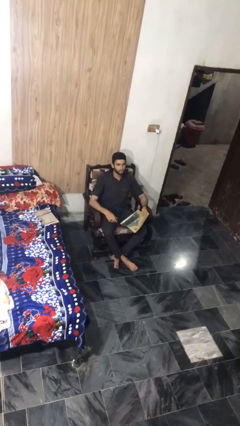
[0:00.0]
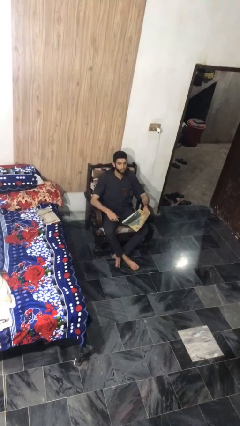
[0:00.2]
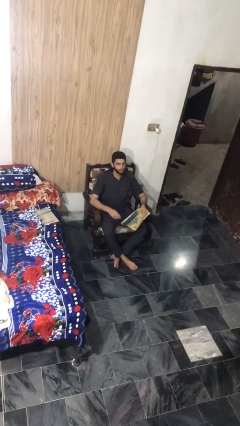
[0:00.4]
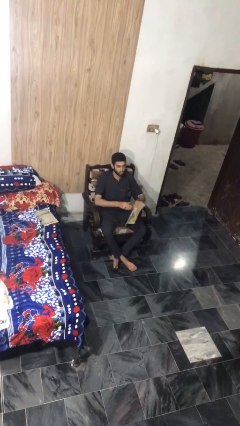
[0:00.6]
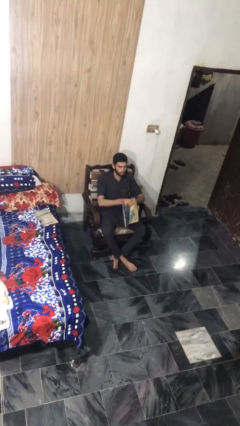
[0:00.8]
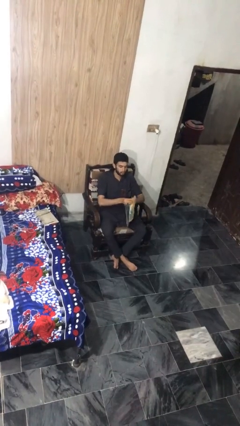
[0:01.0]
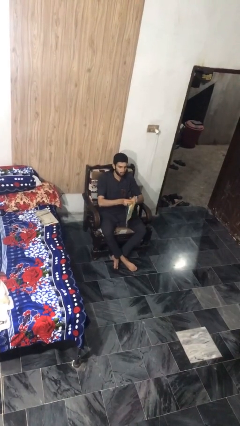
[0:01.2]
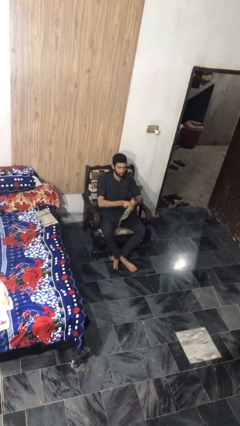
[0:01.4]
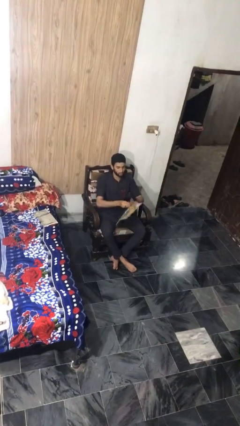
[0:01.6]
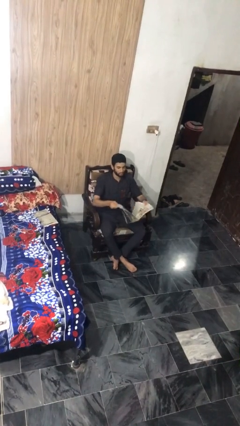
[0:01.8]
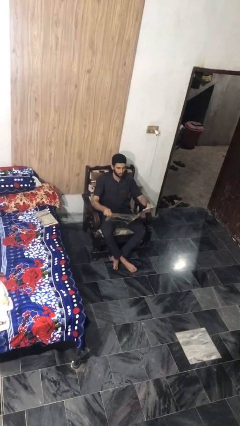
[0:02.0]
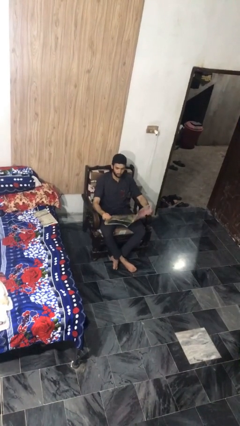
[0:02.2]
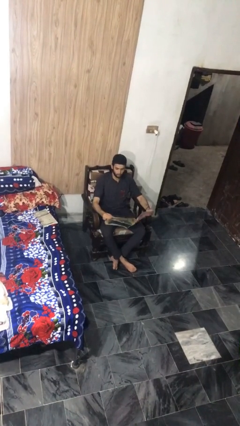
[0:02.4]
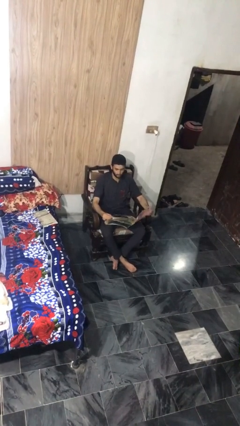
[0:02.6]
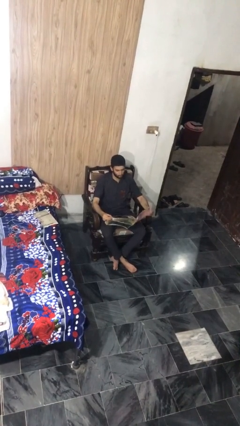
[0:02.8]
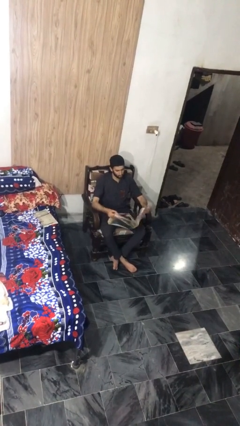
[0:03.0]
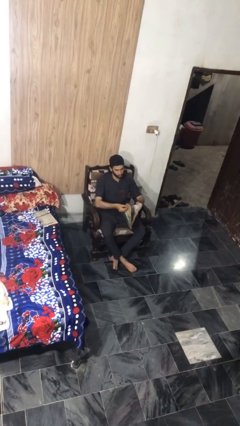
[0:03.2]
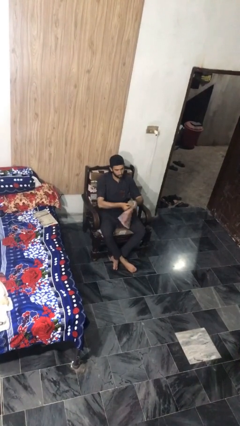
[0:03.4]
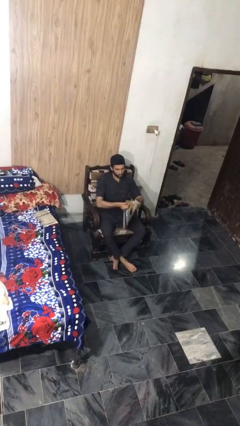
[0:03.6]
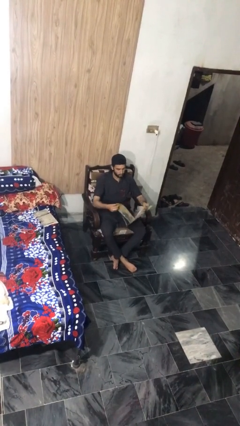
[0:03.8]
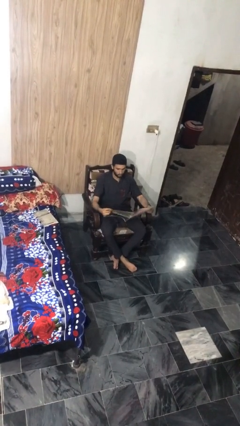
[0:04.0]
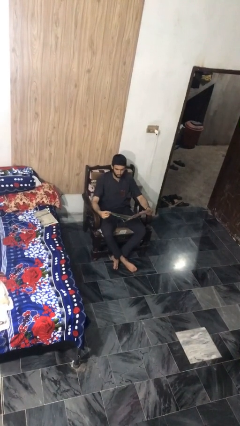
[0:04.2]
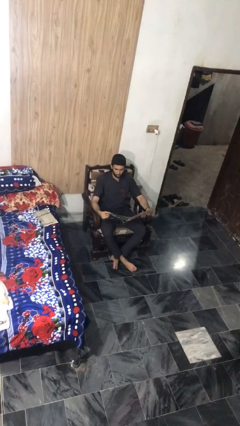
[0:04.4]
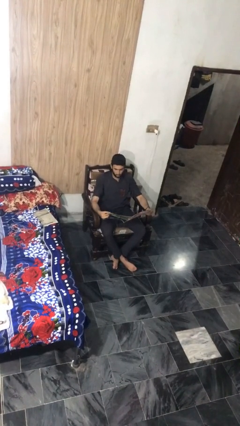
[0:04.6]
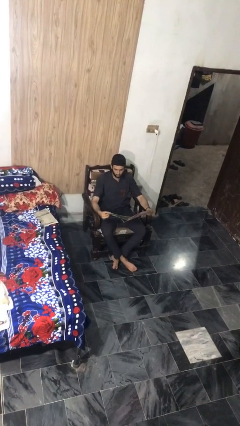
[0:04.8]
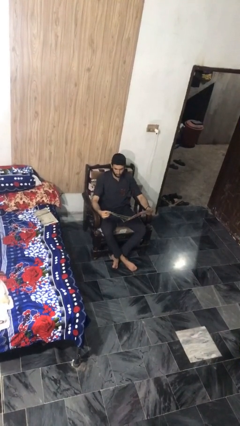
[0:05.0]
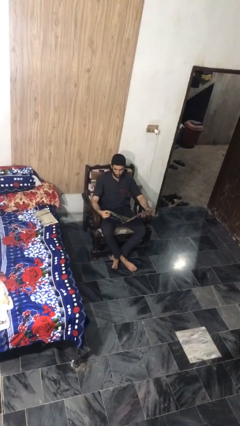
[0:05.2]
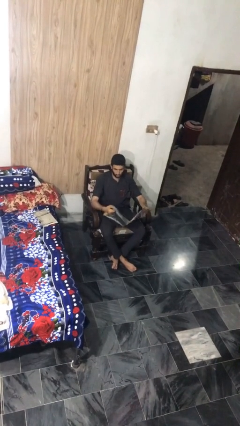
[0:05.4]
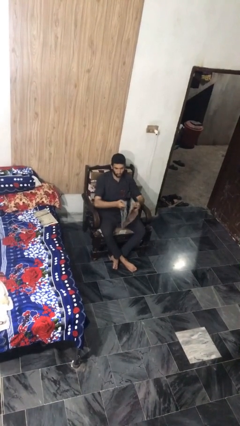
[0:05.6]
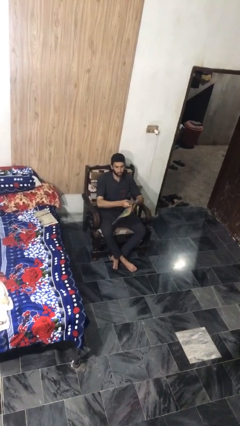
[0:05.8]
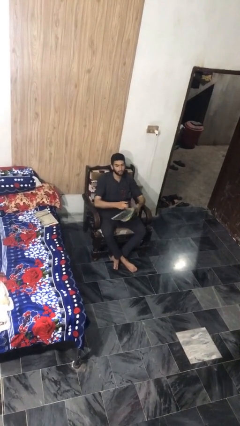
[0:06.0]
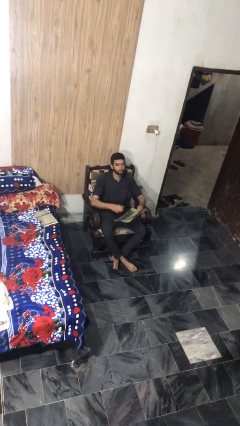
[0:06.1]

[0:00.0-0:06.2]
person reads magazine

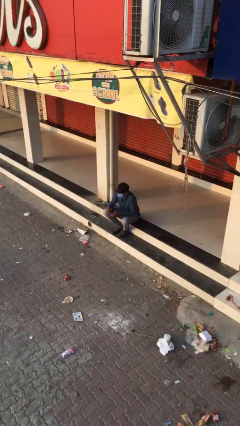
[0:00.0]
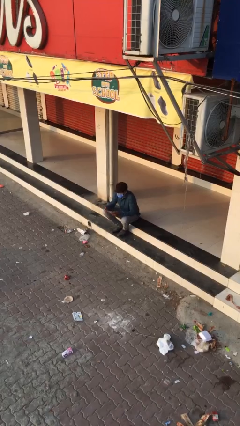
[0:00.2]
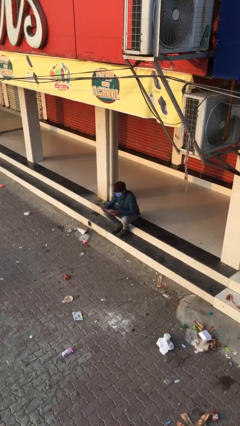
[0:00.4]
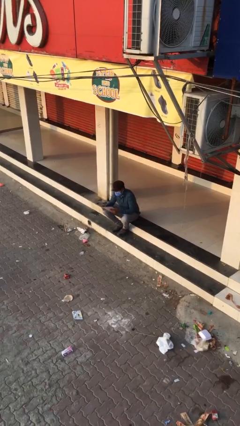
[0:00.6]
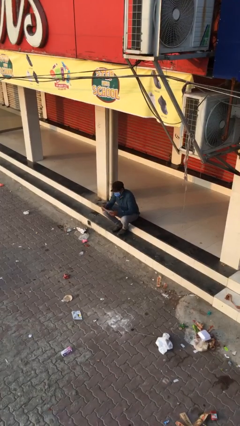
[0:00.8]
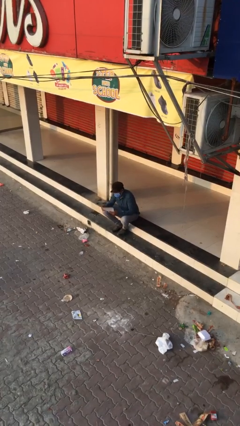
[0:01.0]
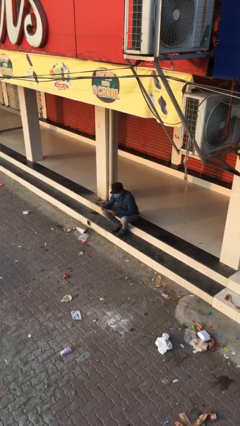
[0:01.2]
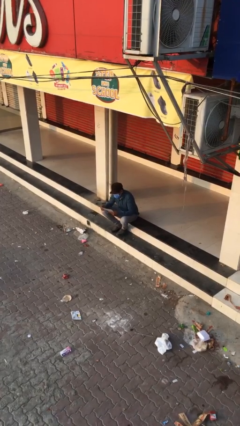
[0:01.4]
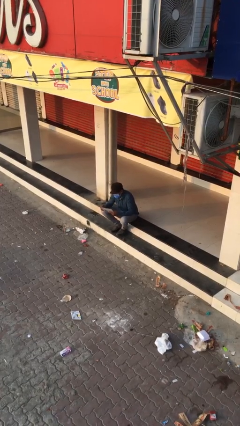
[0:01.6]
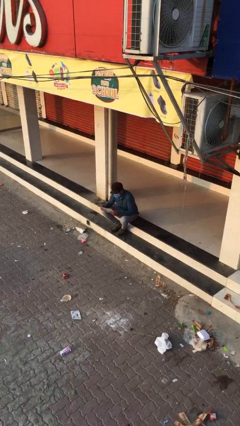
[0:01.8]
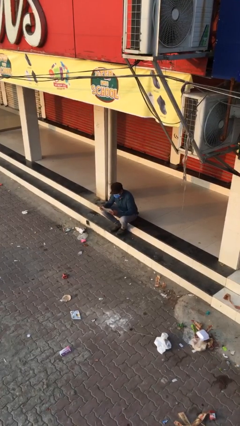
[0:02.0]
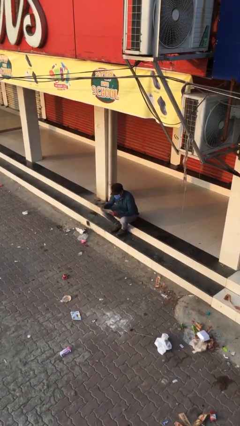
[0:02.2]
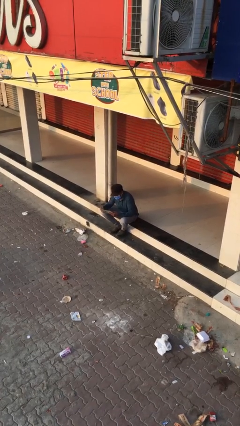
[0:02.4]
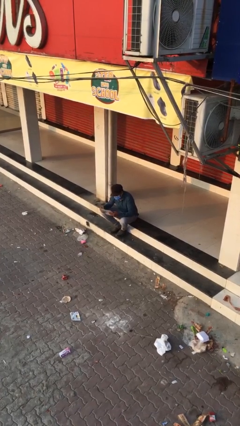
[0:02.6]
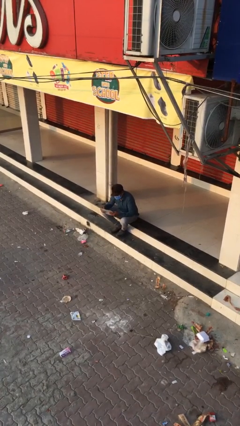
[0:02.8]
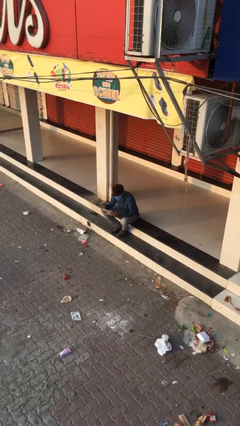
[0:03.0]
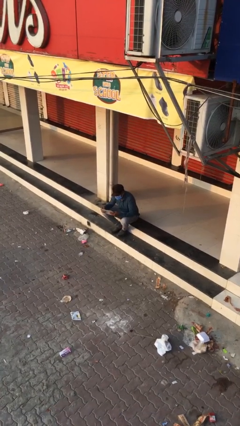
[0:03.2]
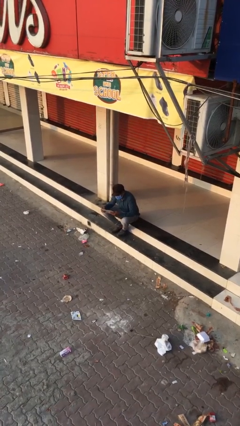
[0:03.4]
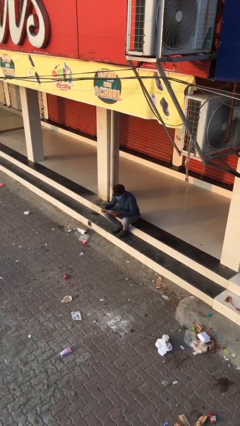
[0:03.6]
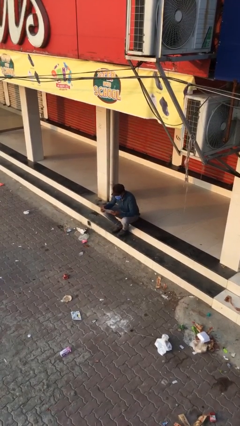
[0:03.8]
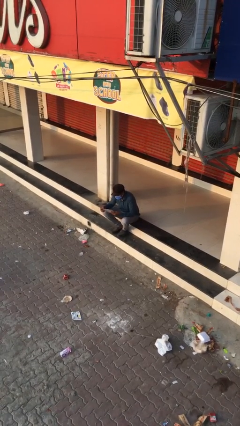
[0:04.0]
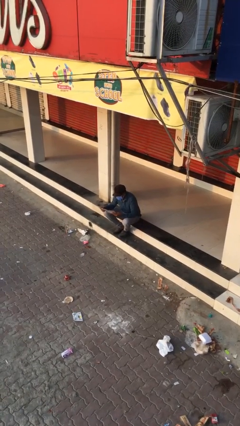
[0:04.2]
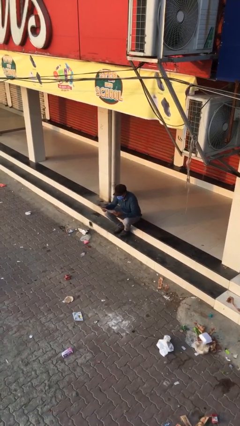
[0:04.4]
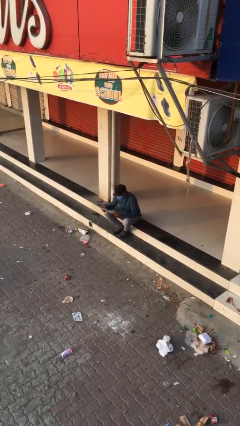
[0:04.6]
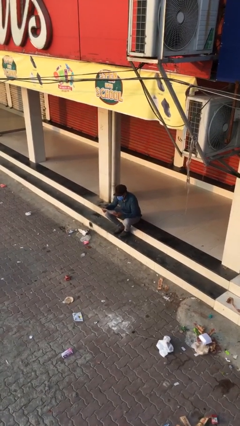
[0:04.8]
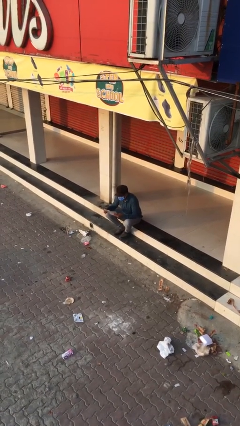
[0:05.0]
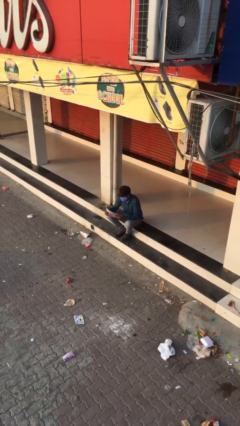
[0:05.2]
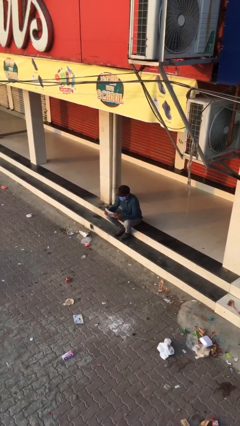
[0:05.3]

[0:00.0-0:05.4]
person reads document

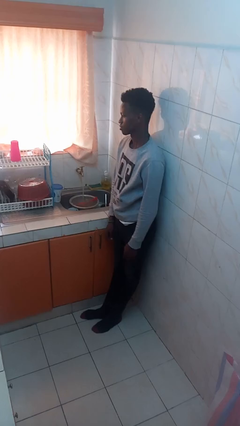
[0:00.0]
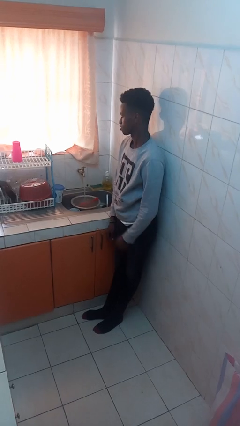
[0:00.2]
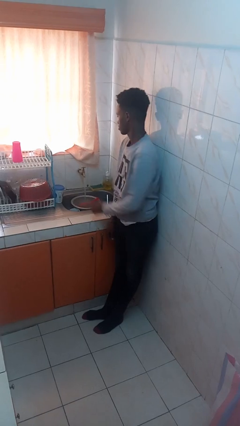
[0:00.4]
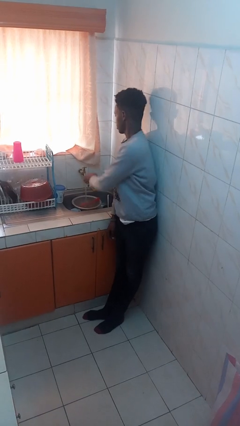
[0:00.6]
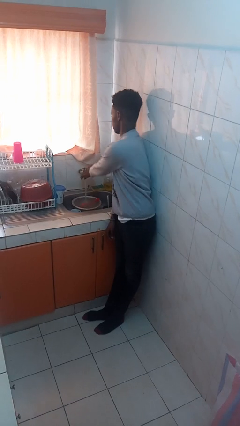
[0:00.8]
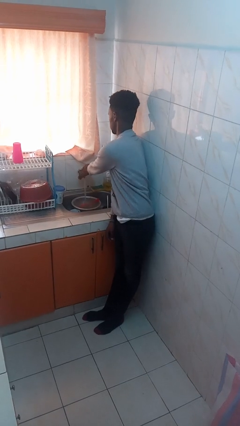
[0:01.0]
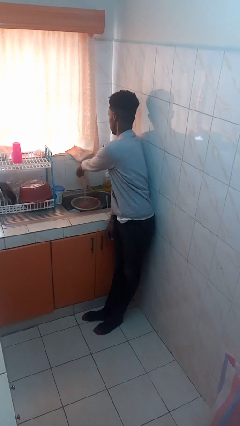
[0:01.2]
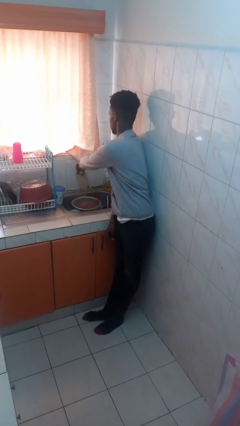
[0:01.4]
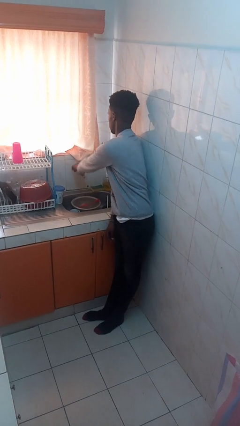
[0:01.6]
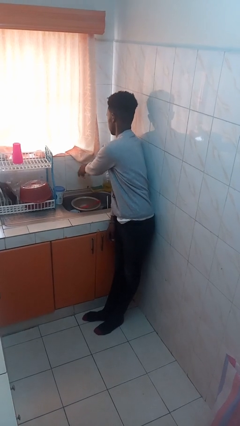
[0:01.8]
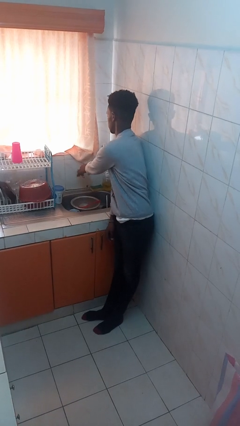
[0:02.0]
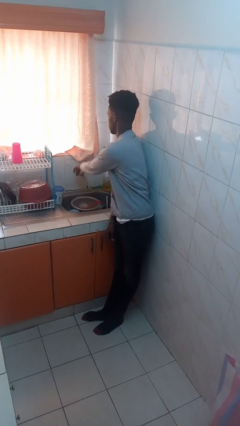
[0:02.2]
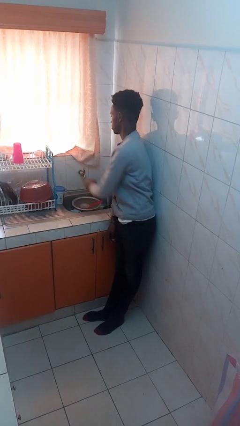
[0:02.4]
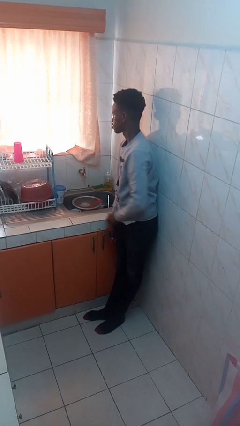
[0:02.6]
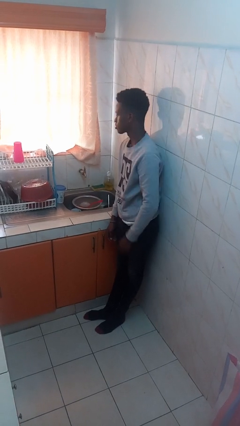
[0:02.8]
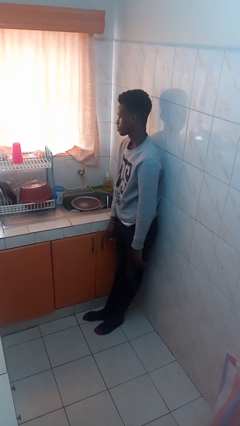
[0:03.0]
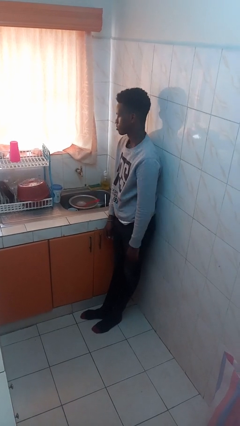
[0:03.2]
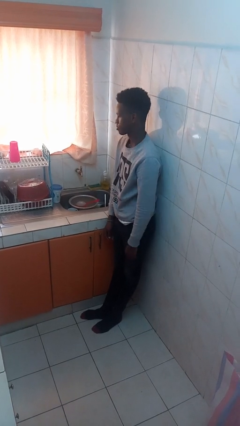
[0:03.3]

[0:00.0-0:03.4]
person turns off faucet

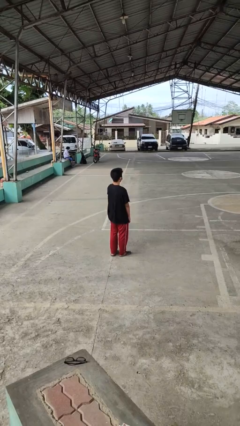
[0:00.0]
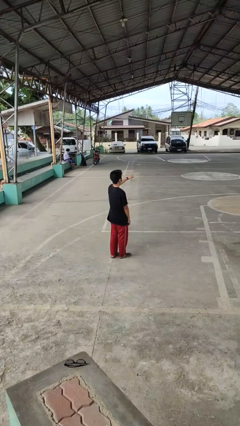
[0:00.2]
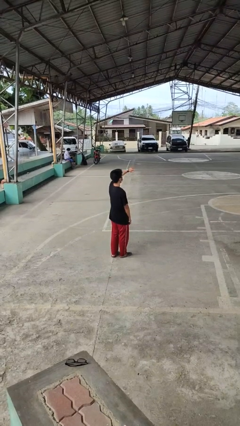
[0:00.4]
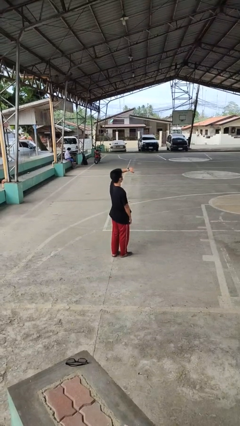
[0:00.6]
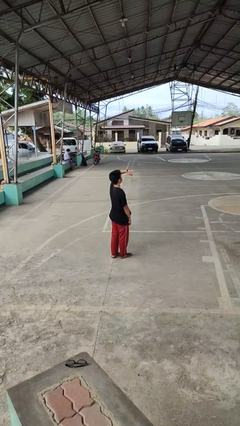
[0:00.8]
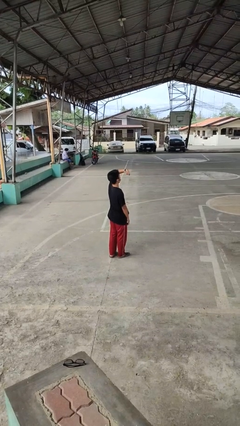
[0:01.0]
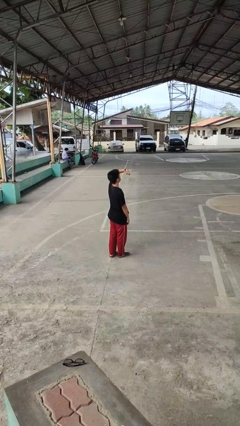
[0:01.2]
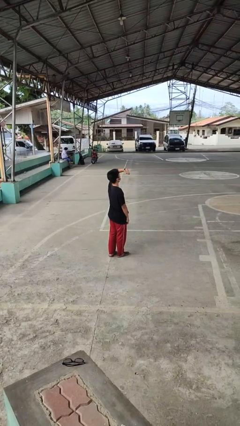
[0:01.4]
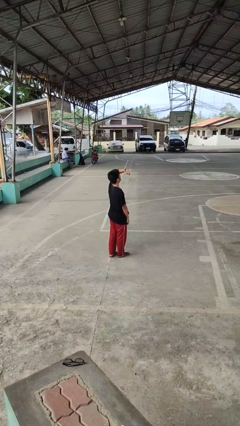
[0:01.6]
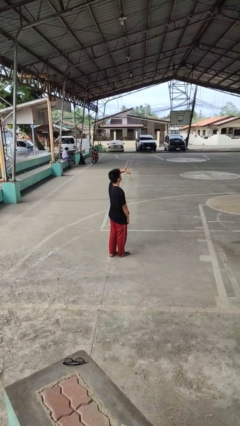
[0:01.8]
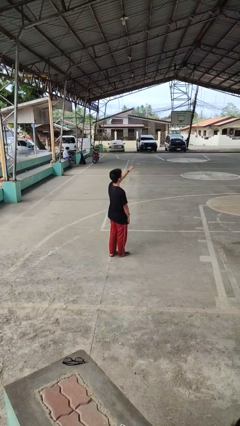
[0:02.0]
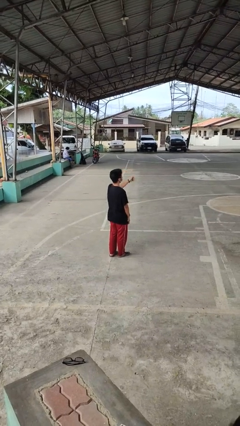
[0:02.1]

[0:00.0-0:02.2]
person looks at wristwatch

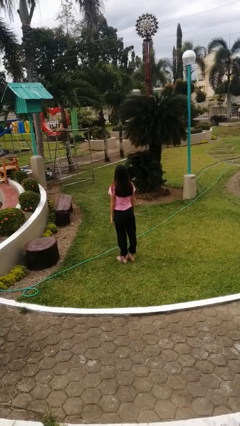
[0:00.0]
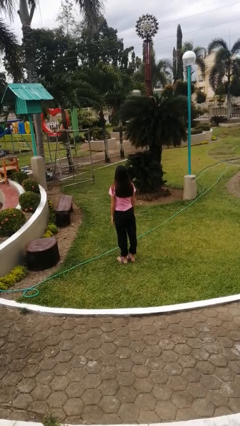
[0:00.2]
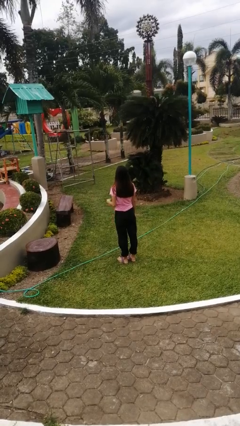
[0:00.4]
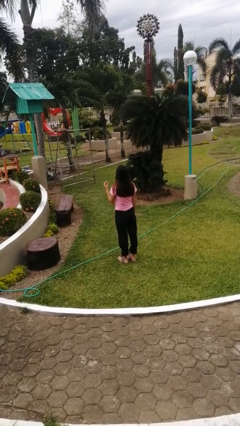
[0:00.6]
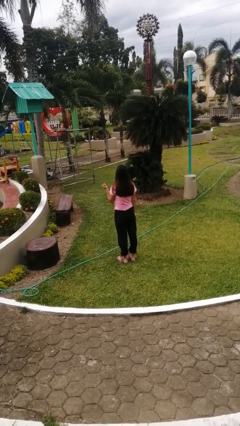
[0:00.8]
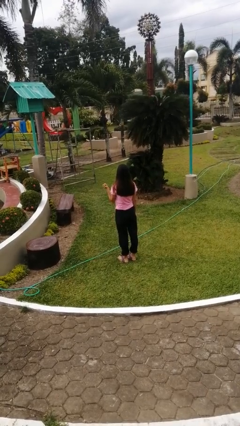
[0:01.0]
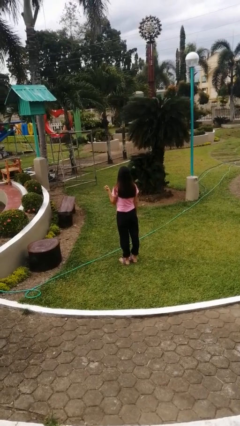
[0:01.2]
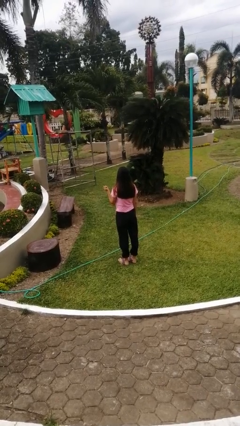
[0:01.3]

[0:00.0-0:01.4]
person snaps fingers
